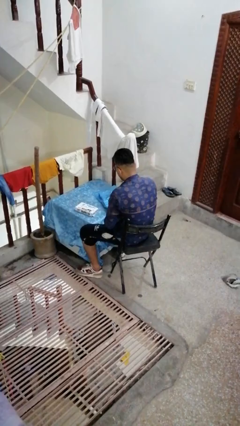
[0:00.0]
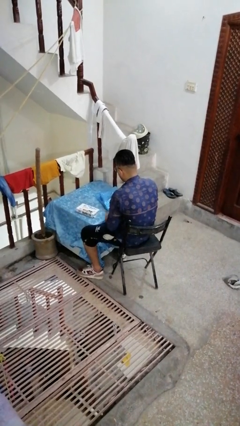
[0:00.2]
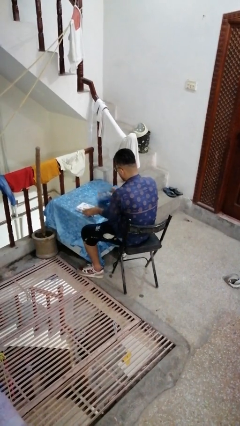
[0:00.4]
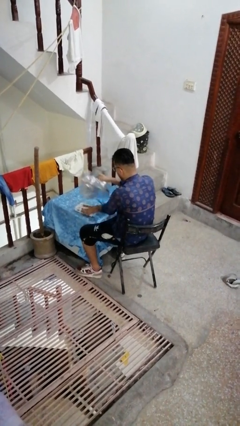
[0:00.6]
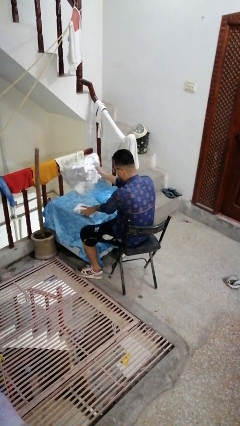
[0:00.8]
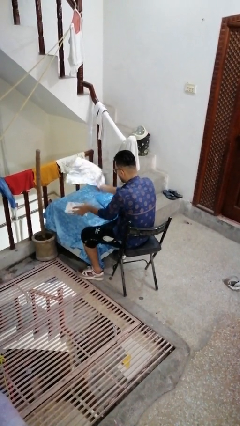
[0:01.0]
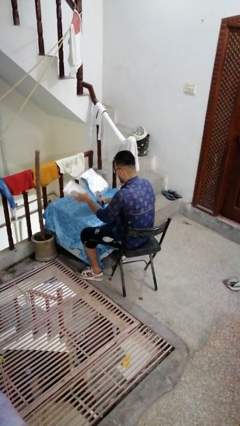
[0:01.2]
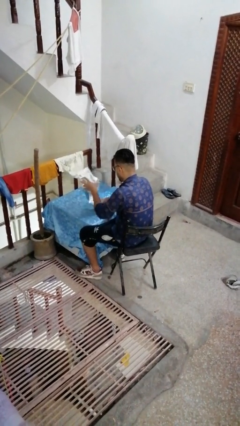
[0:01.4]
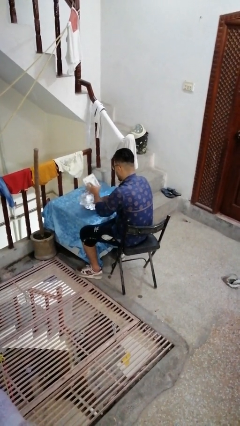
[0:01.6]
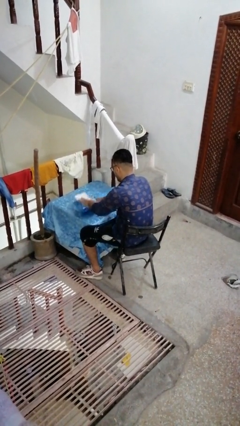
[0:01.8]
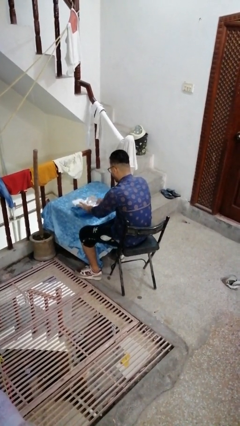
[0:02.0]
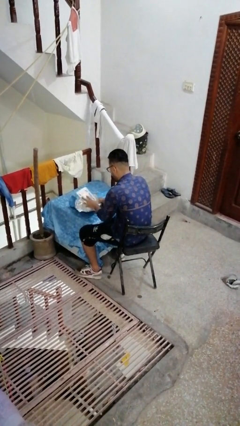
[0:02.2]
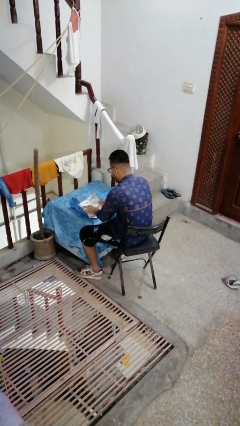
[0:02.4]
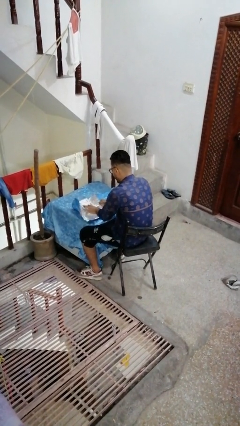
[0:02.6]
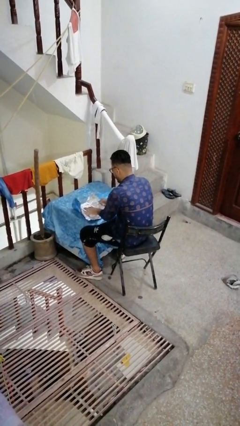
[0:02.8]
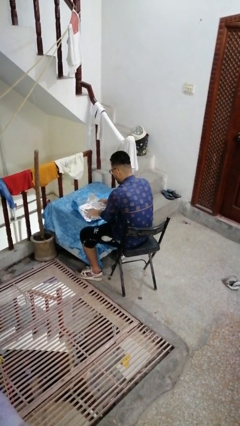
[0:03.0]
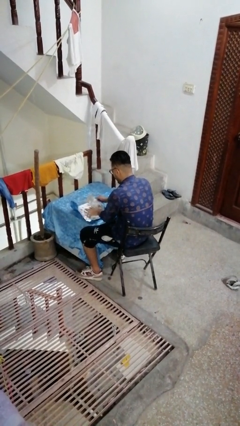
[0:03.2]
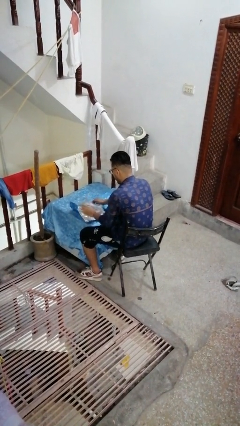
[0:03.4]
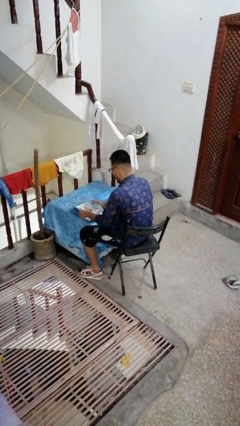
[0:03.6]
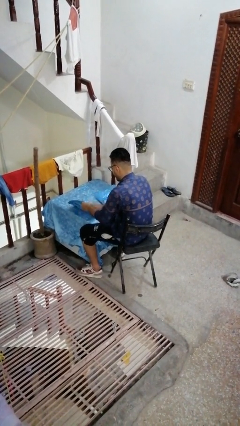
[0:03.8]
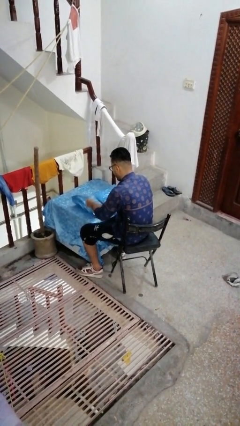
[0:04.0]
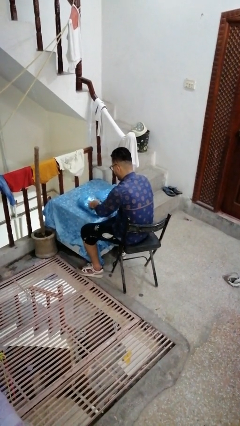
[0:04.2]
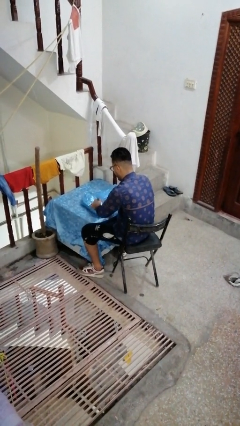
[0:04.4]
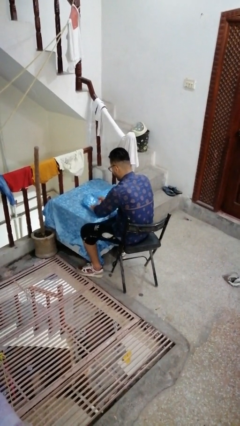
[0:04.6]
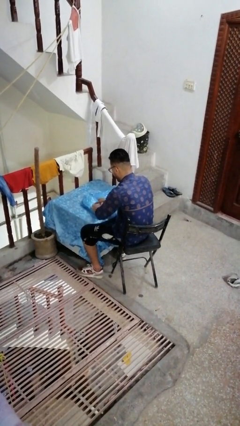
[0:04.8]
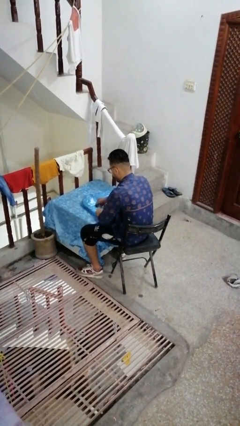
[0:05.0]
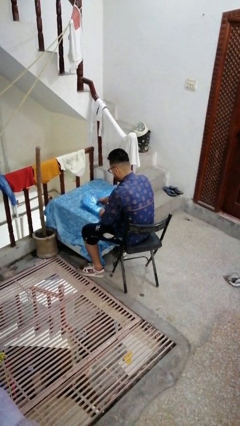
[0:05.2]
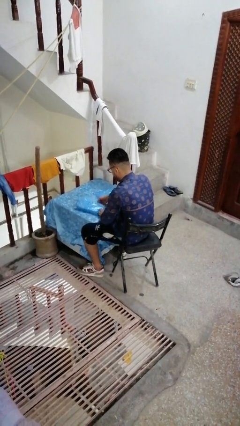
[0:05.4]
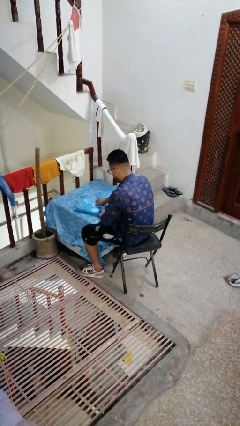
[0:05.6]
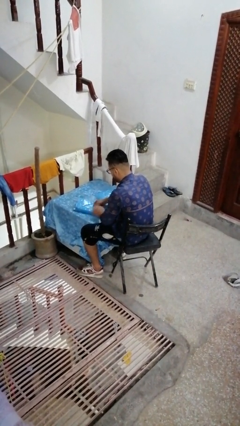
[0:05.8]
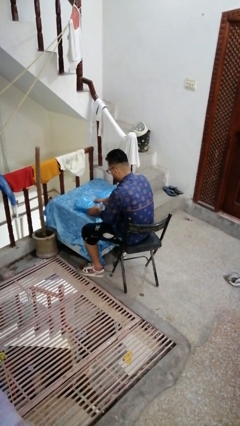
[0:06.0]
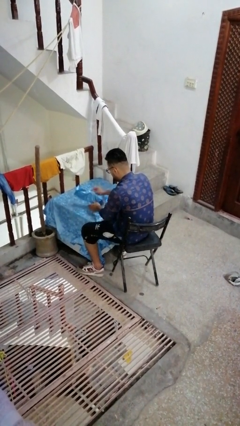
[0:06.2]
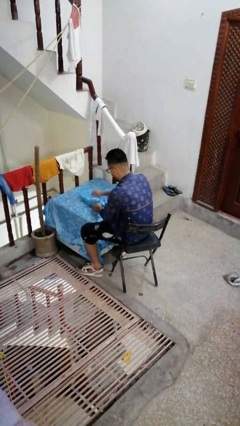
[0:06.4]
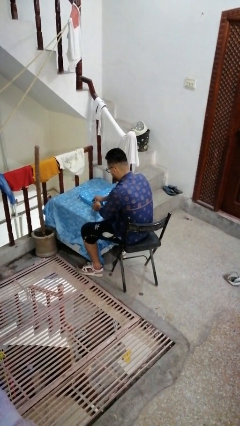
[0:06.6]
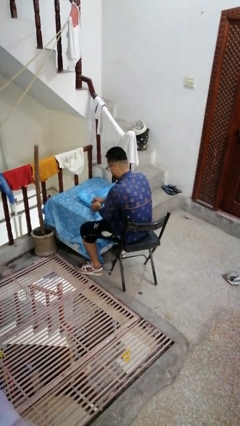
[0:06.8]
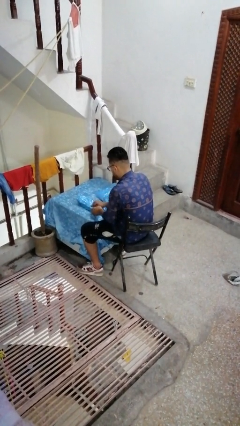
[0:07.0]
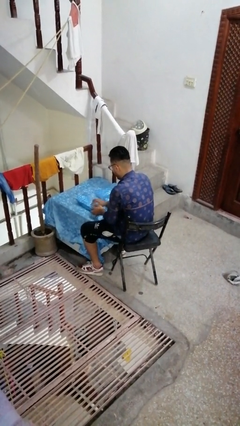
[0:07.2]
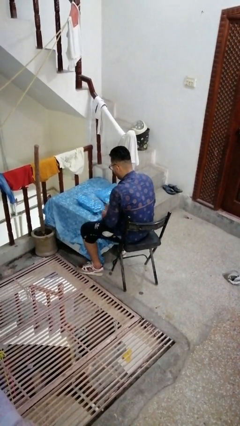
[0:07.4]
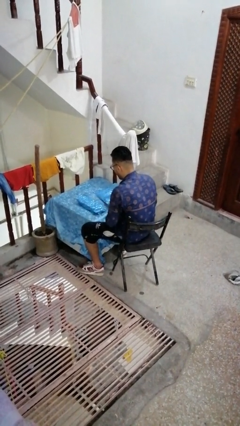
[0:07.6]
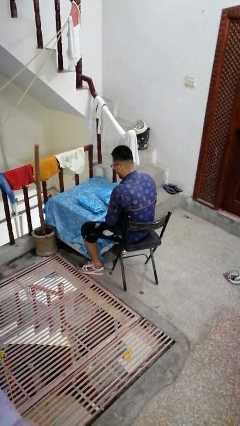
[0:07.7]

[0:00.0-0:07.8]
person wraps box

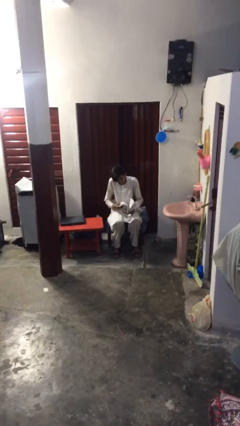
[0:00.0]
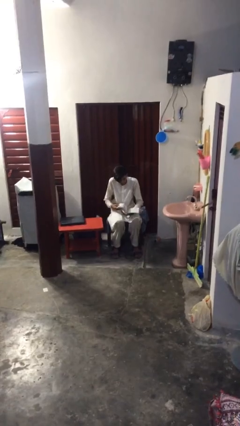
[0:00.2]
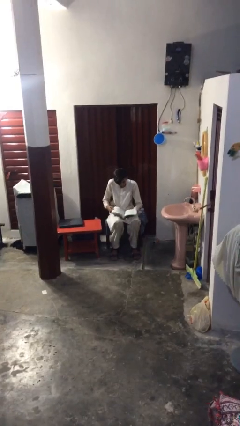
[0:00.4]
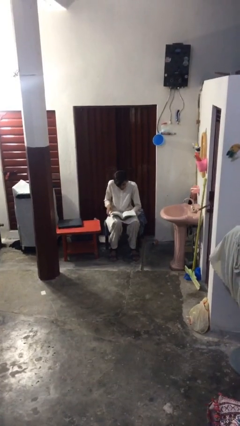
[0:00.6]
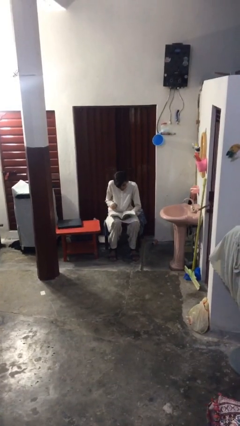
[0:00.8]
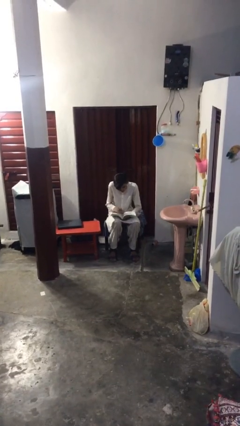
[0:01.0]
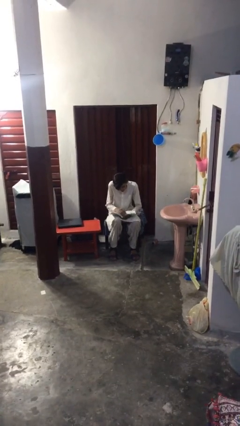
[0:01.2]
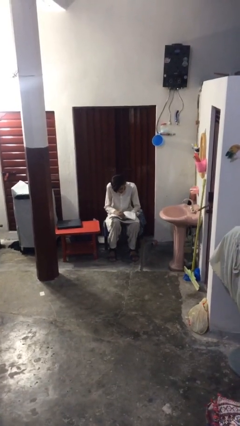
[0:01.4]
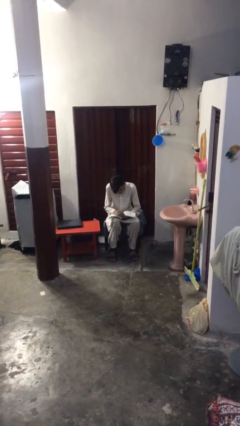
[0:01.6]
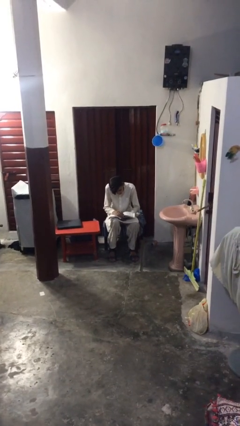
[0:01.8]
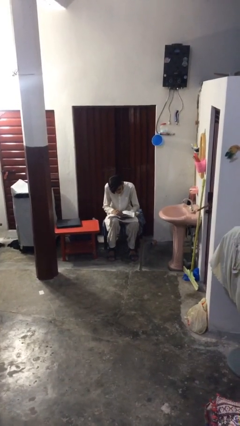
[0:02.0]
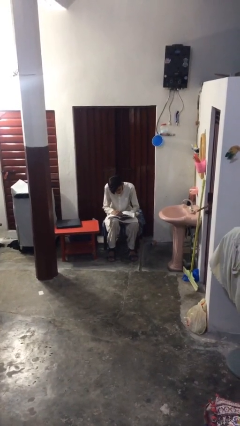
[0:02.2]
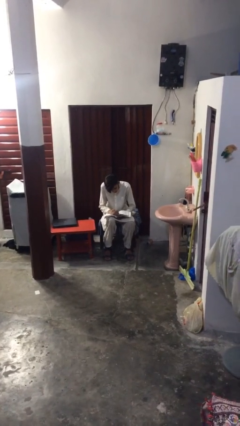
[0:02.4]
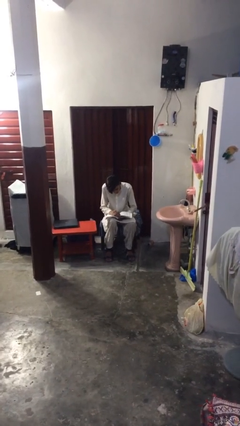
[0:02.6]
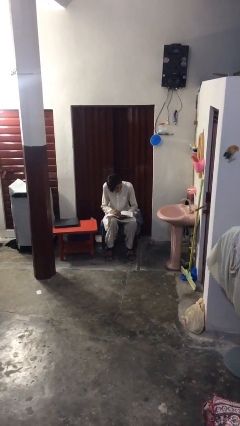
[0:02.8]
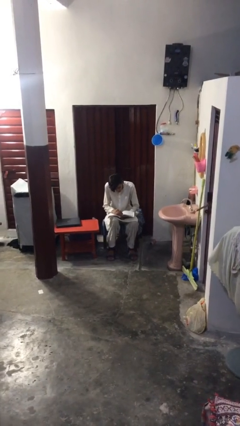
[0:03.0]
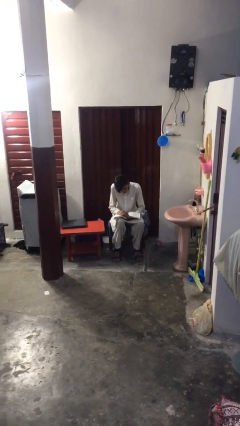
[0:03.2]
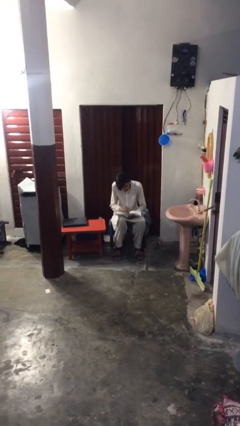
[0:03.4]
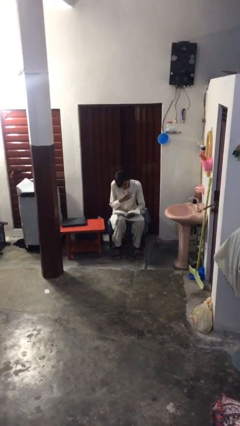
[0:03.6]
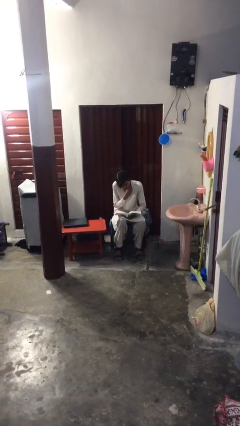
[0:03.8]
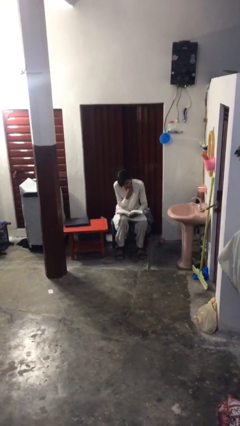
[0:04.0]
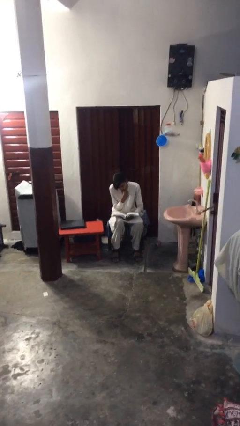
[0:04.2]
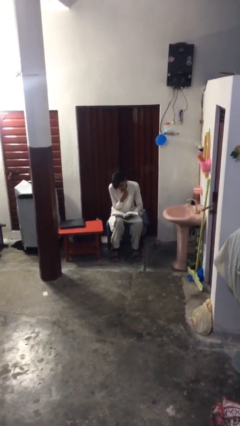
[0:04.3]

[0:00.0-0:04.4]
person reads document

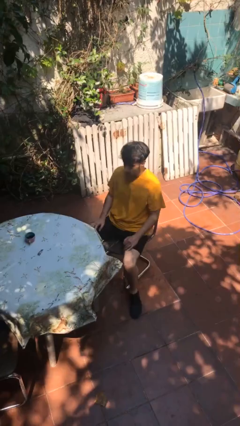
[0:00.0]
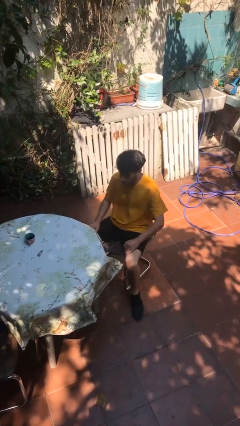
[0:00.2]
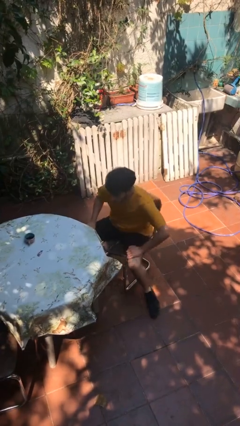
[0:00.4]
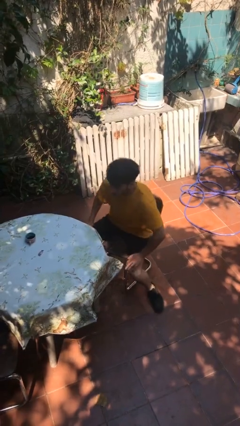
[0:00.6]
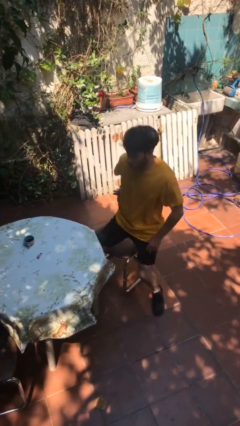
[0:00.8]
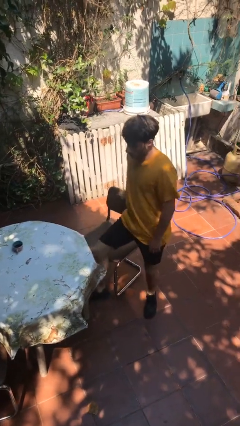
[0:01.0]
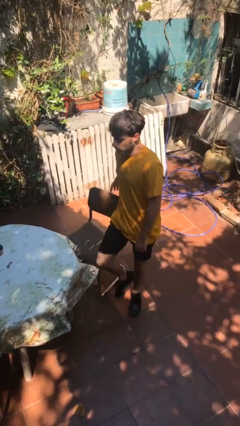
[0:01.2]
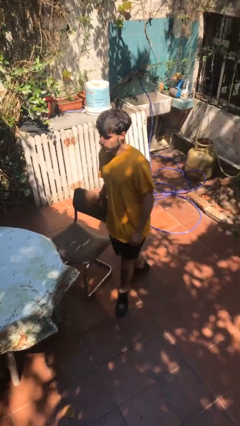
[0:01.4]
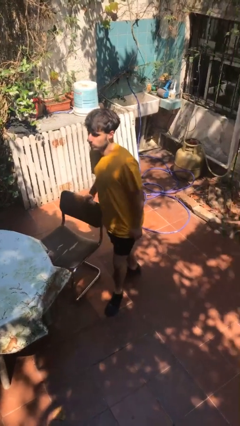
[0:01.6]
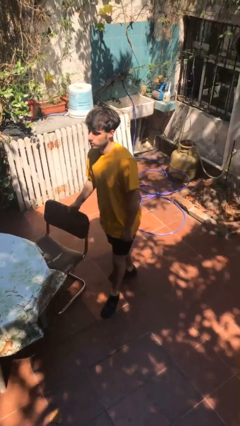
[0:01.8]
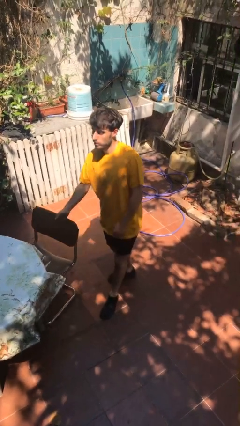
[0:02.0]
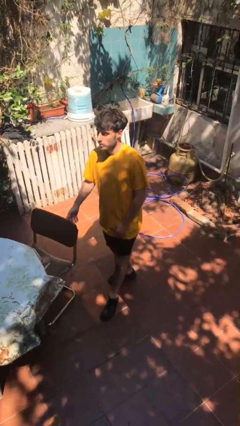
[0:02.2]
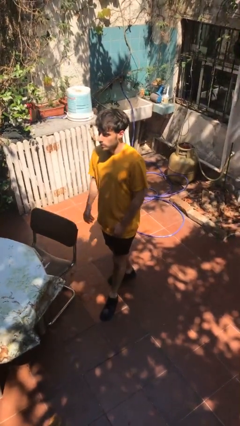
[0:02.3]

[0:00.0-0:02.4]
person stands up

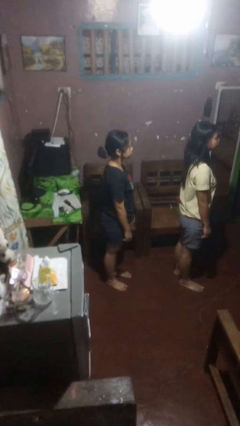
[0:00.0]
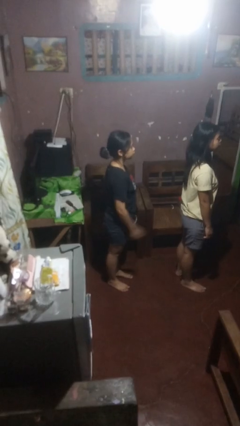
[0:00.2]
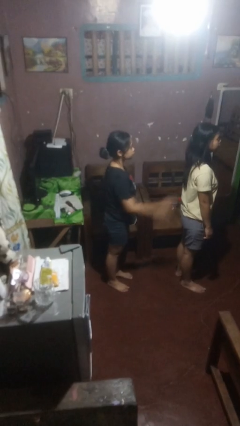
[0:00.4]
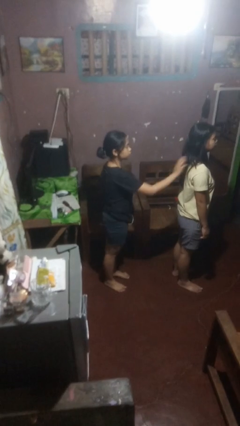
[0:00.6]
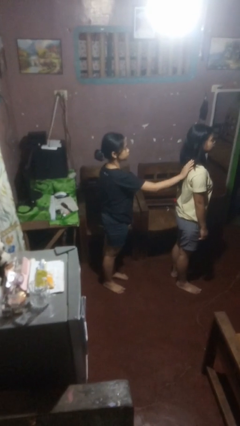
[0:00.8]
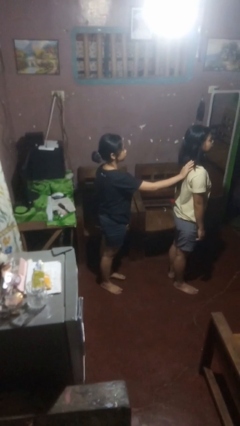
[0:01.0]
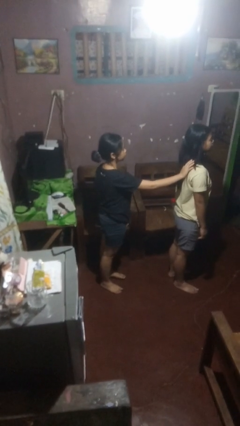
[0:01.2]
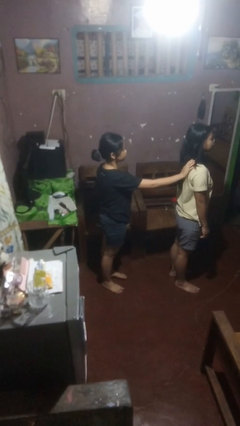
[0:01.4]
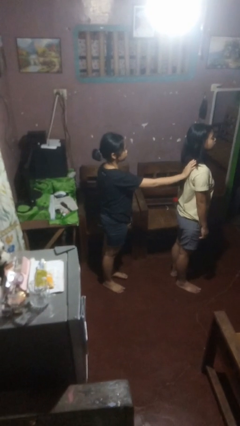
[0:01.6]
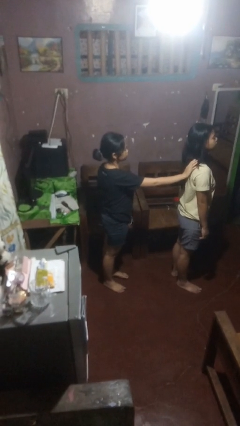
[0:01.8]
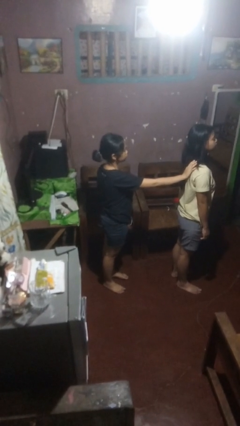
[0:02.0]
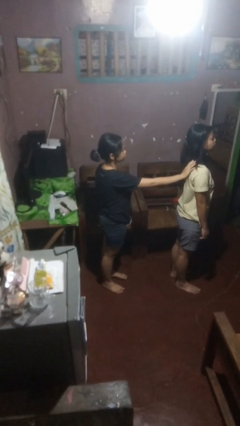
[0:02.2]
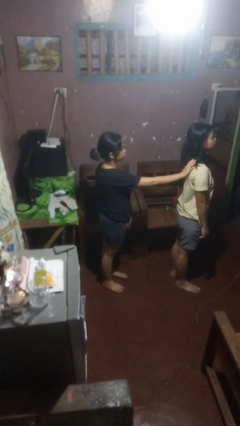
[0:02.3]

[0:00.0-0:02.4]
person touches back of person

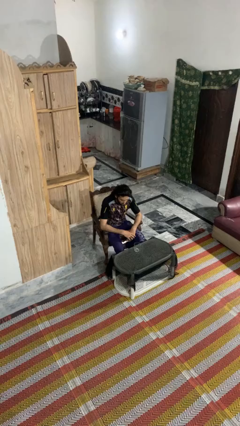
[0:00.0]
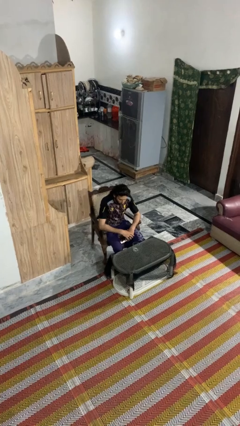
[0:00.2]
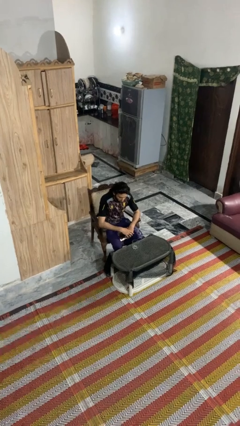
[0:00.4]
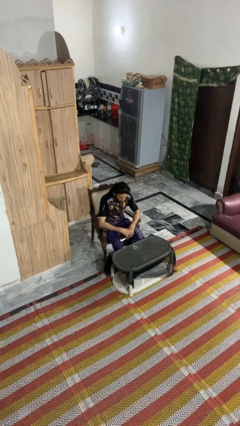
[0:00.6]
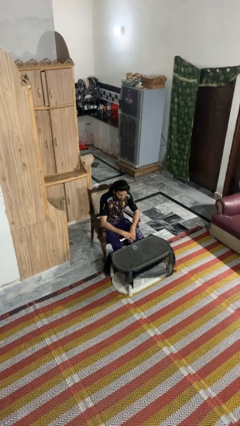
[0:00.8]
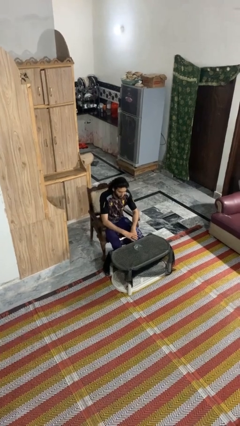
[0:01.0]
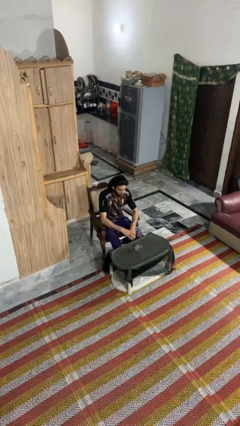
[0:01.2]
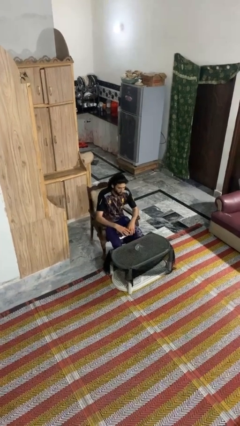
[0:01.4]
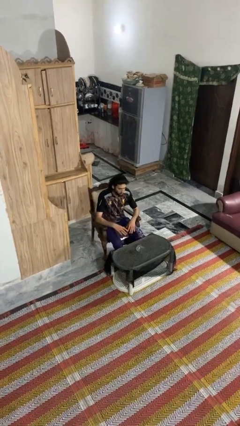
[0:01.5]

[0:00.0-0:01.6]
person knocks over glass
